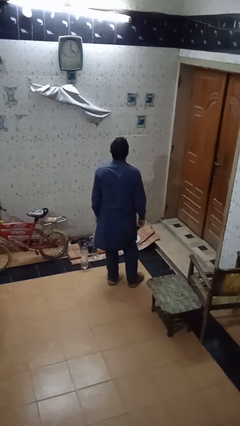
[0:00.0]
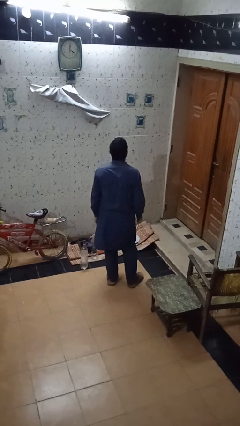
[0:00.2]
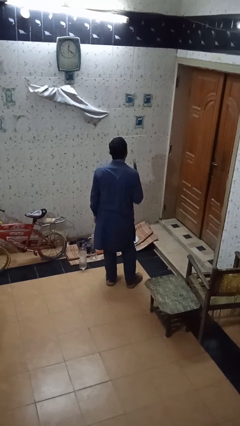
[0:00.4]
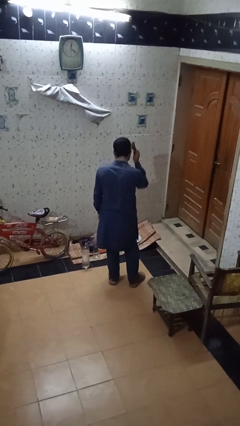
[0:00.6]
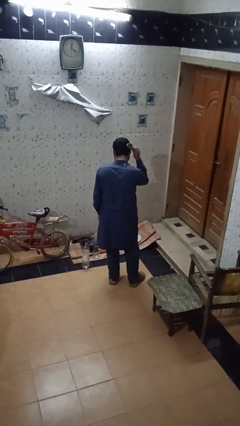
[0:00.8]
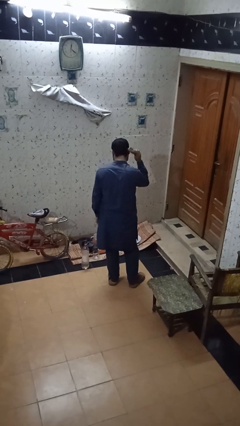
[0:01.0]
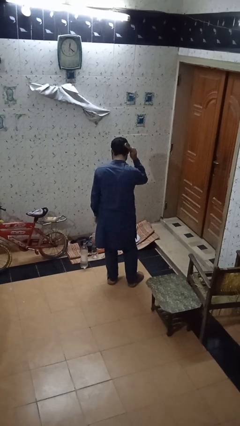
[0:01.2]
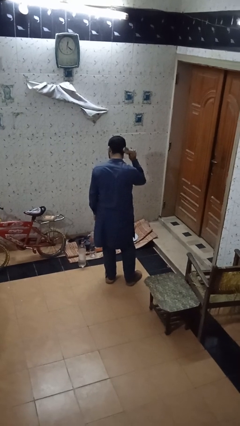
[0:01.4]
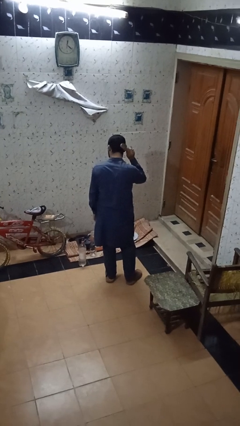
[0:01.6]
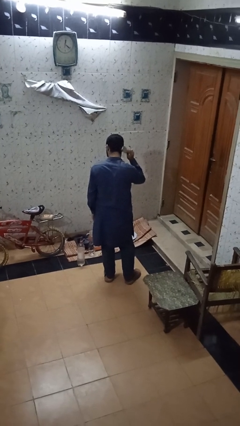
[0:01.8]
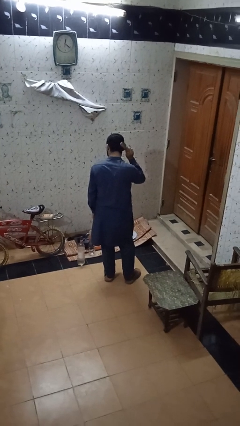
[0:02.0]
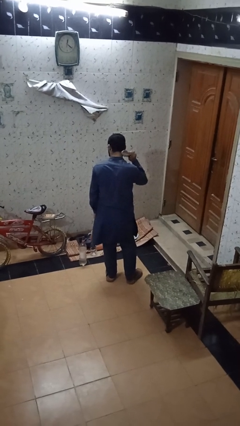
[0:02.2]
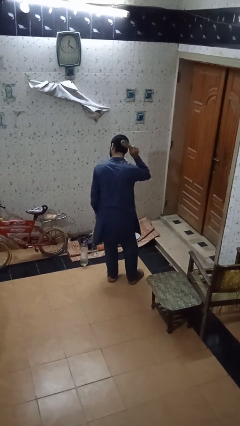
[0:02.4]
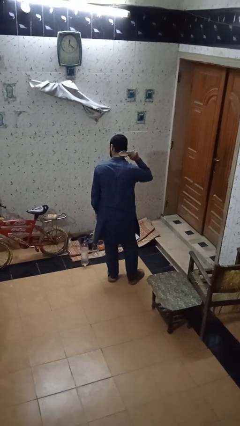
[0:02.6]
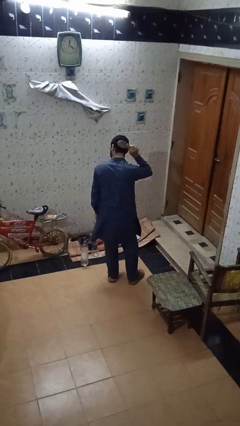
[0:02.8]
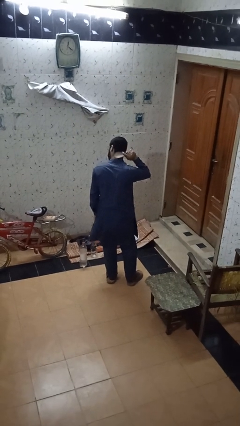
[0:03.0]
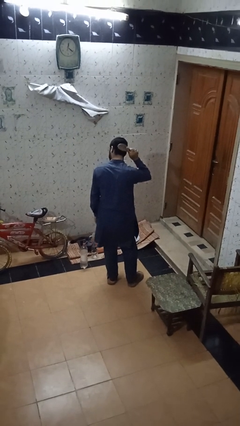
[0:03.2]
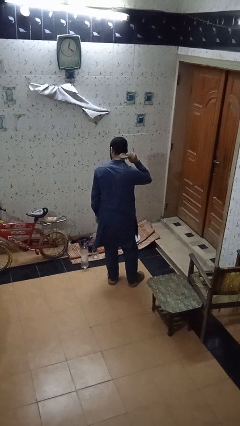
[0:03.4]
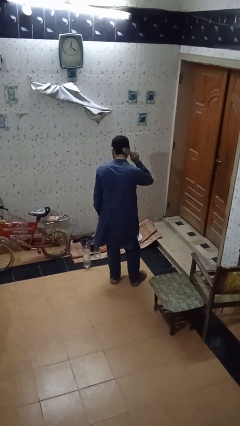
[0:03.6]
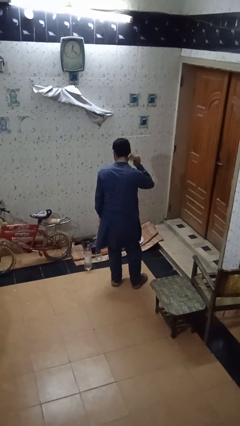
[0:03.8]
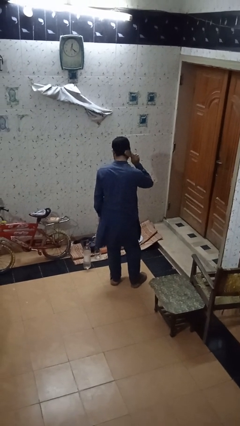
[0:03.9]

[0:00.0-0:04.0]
person brushes hair

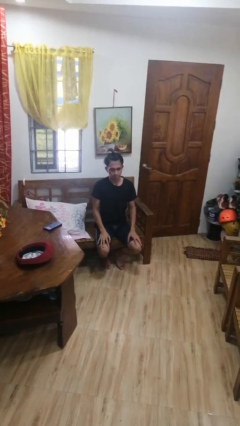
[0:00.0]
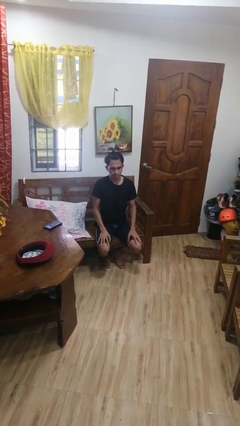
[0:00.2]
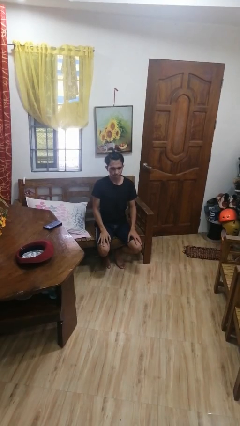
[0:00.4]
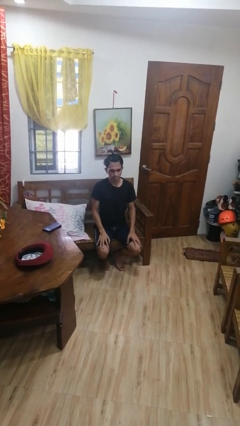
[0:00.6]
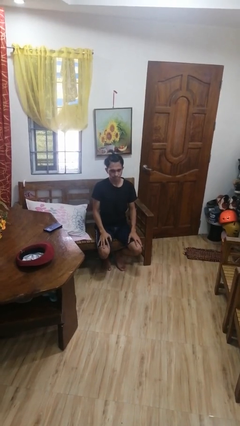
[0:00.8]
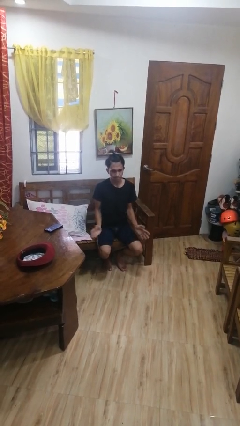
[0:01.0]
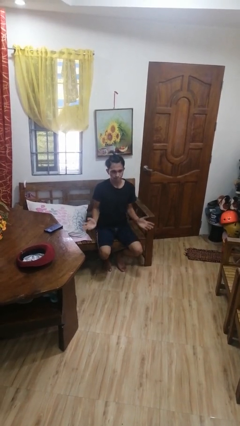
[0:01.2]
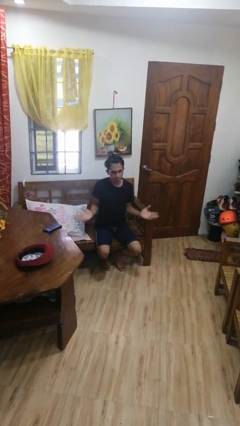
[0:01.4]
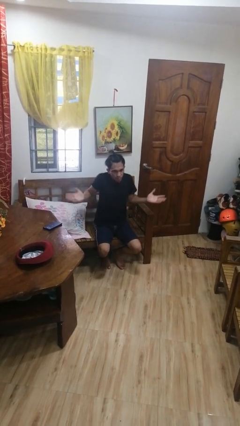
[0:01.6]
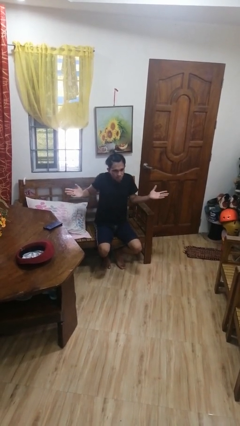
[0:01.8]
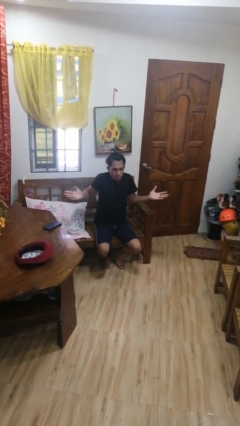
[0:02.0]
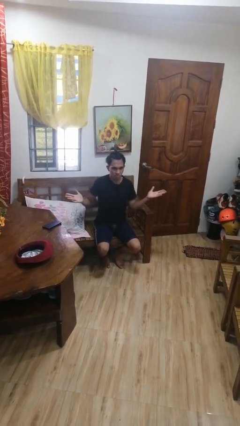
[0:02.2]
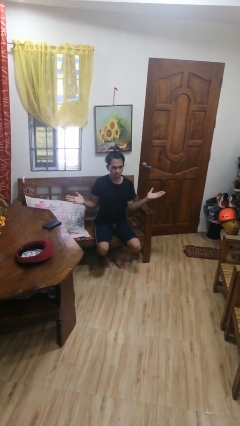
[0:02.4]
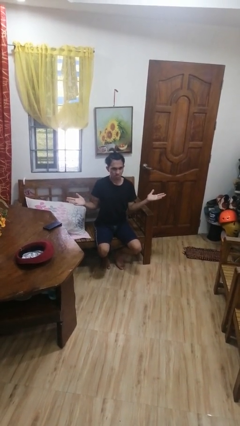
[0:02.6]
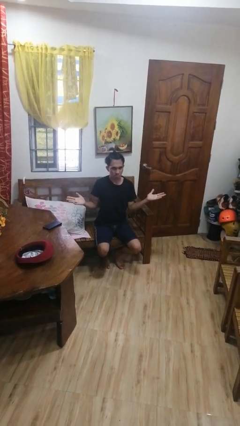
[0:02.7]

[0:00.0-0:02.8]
person shrugs

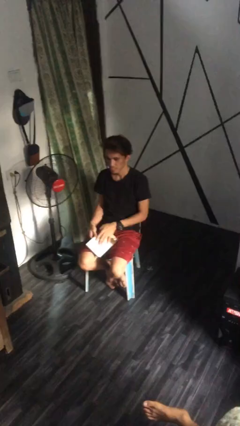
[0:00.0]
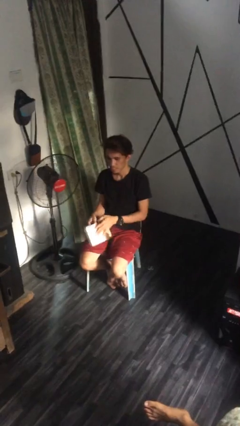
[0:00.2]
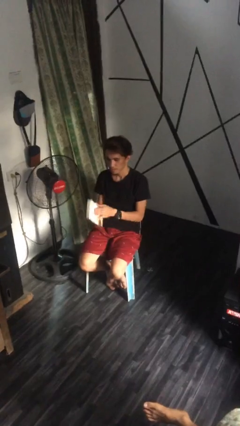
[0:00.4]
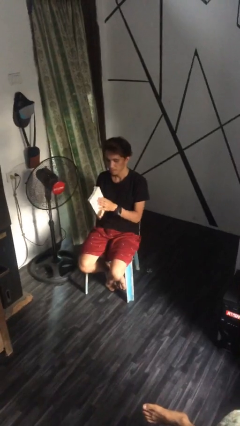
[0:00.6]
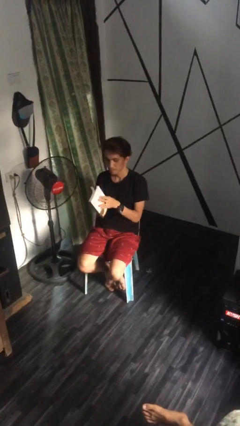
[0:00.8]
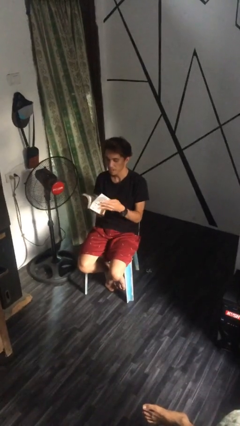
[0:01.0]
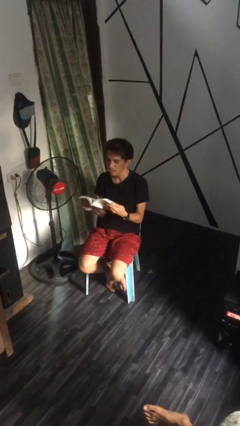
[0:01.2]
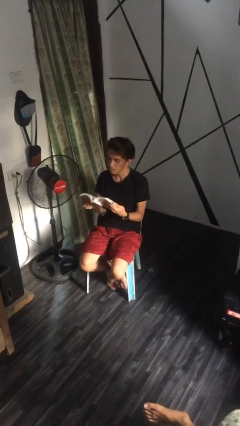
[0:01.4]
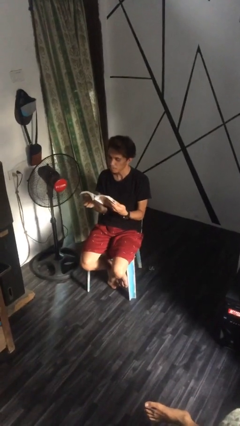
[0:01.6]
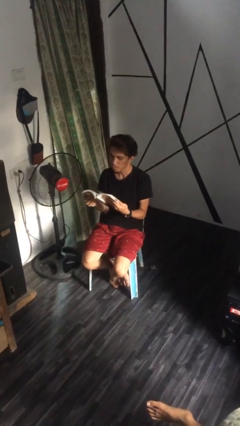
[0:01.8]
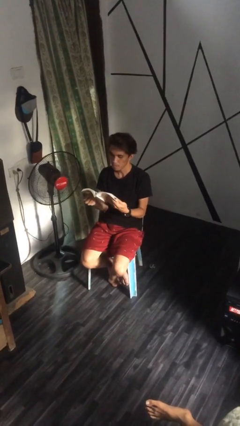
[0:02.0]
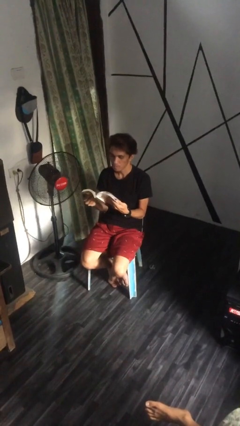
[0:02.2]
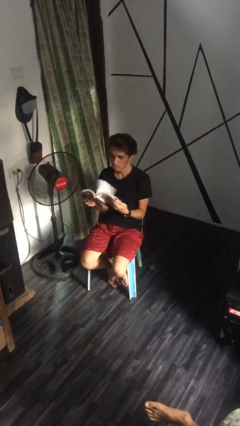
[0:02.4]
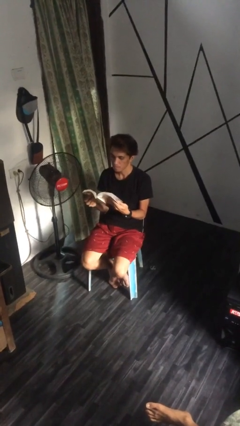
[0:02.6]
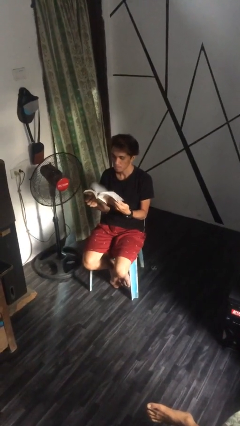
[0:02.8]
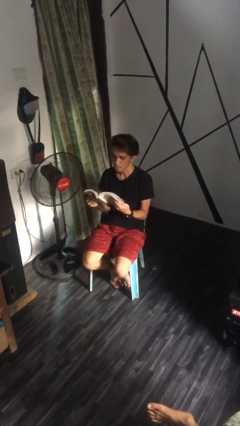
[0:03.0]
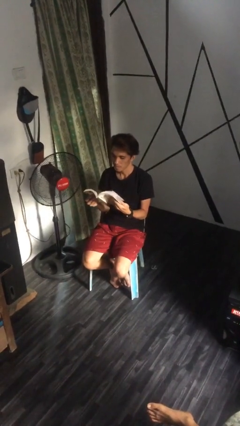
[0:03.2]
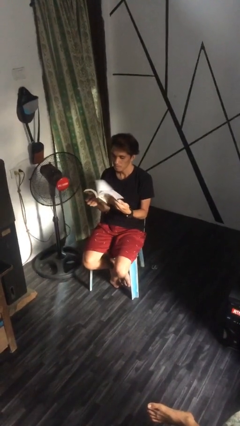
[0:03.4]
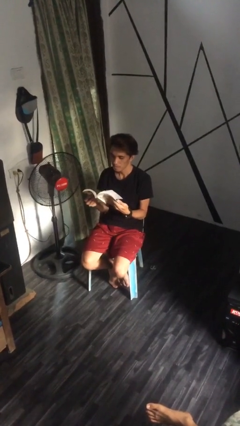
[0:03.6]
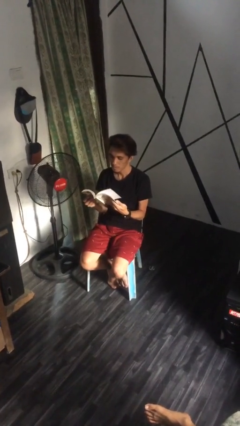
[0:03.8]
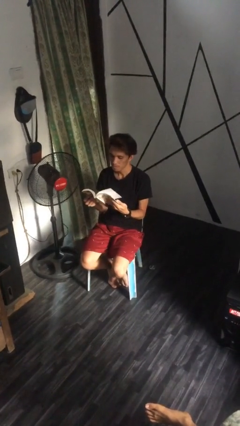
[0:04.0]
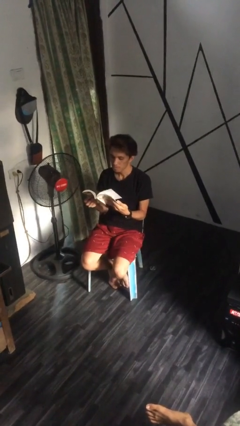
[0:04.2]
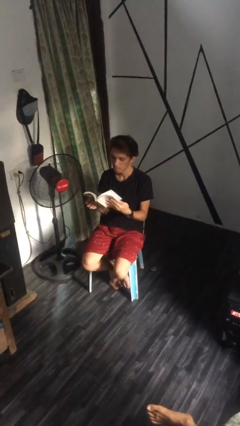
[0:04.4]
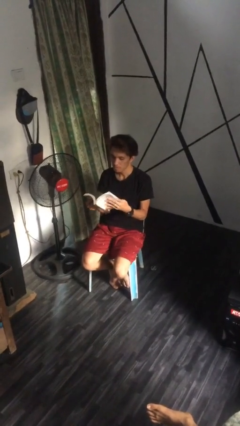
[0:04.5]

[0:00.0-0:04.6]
person reads document

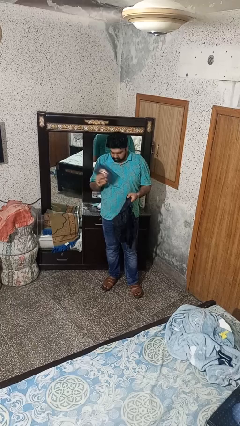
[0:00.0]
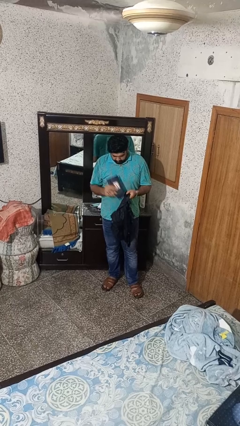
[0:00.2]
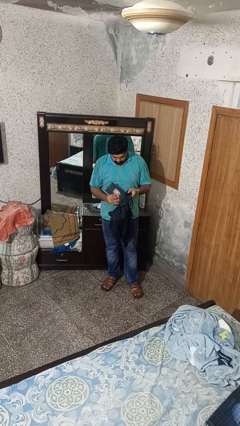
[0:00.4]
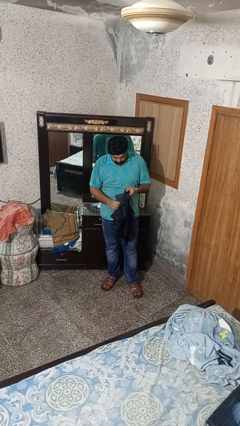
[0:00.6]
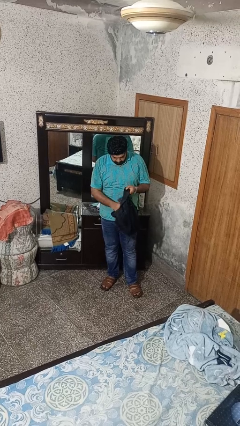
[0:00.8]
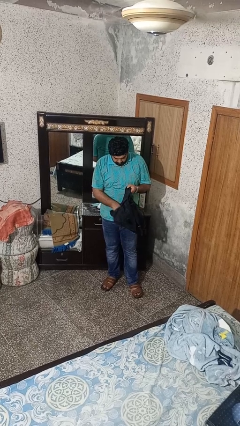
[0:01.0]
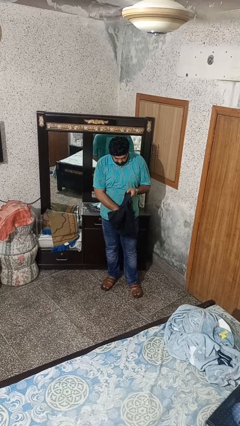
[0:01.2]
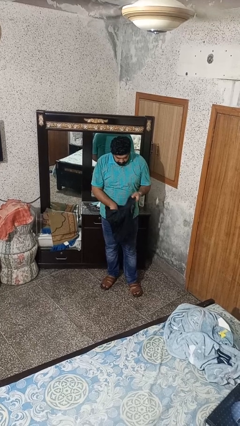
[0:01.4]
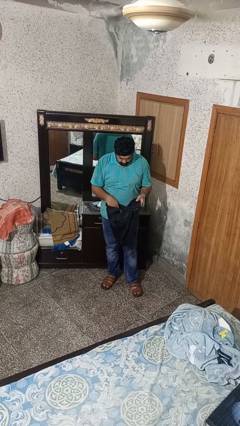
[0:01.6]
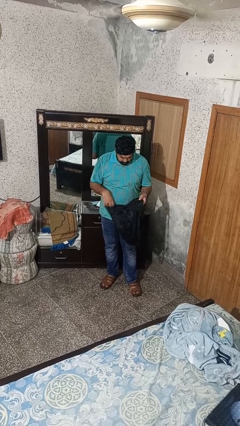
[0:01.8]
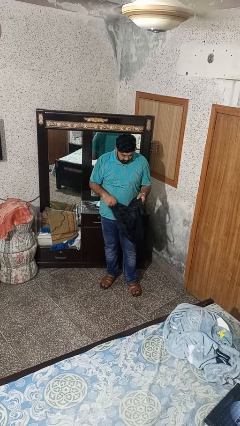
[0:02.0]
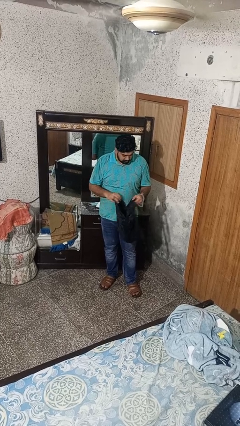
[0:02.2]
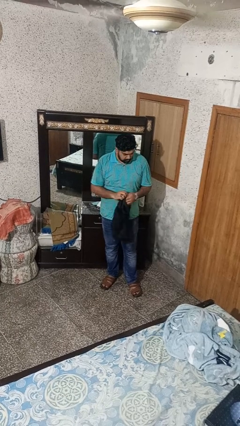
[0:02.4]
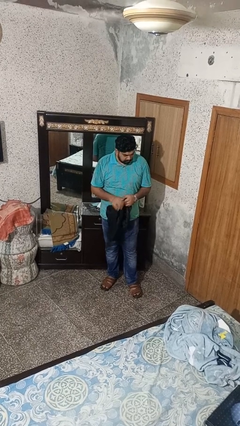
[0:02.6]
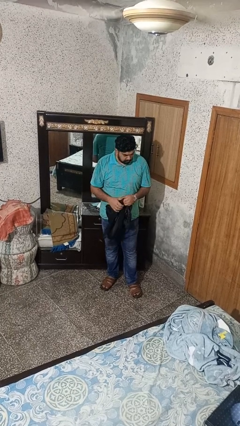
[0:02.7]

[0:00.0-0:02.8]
person puts object into backpack

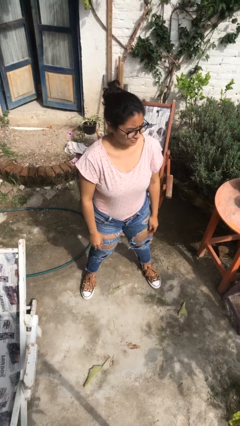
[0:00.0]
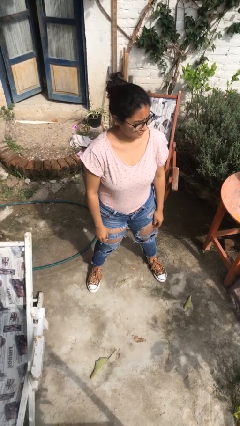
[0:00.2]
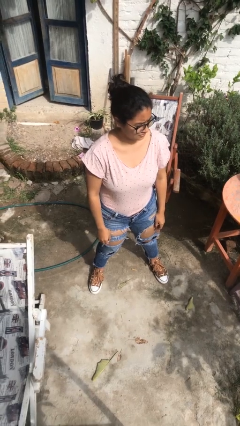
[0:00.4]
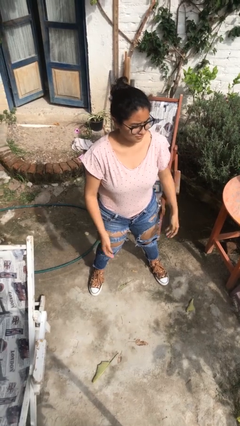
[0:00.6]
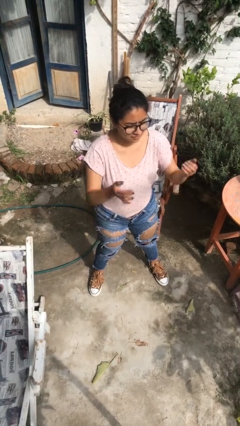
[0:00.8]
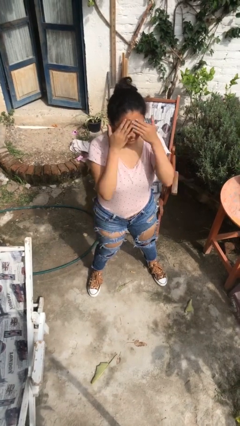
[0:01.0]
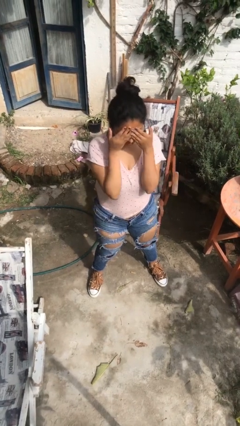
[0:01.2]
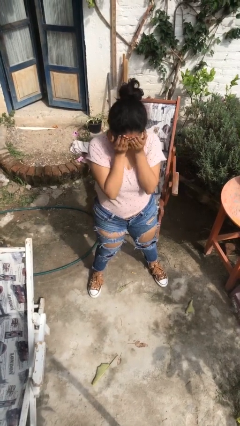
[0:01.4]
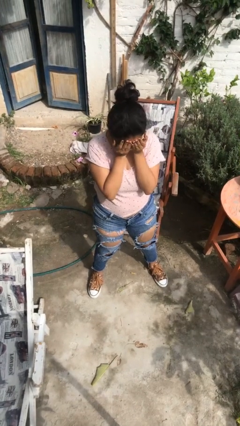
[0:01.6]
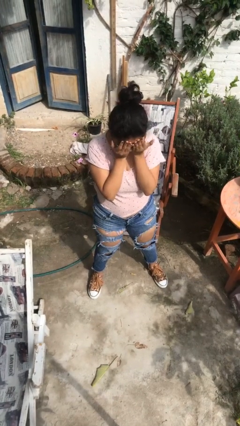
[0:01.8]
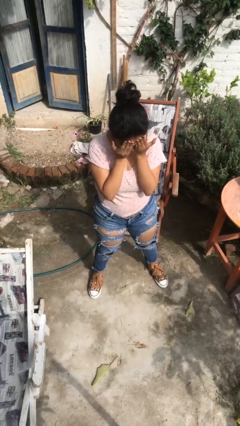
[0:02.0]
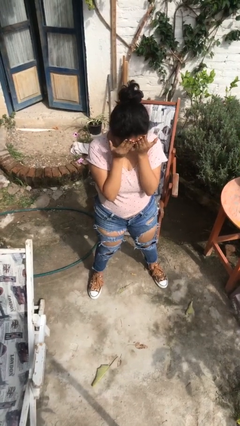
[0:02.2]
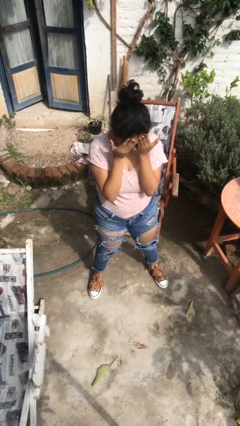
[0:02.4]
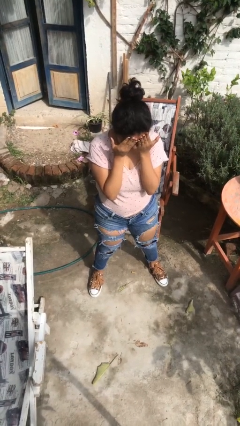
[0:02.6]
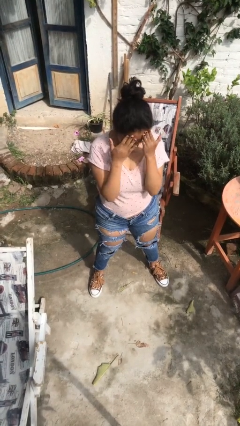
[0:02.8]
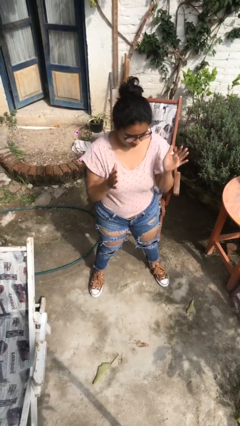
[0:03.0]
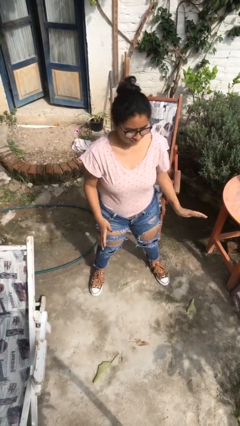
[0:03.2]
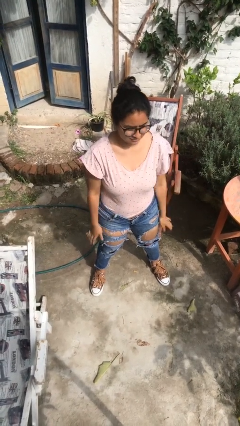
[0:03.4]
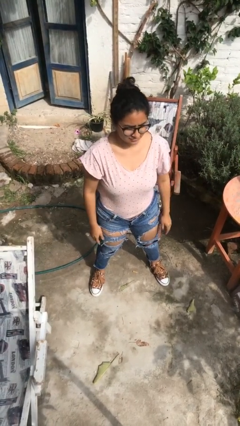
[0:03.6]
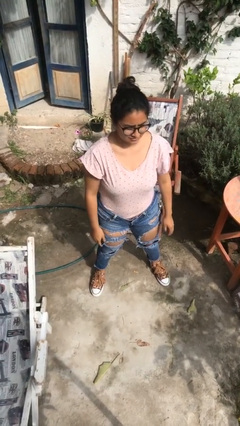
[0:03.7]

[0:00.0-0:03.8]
person covers face with hands
